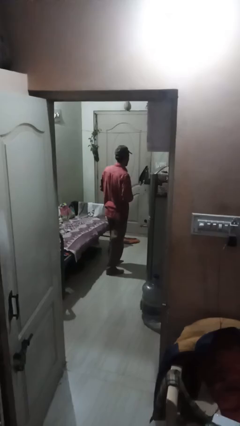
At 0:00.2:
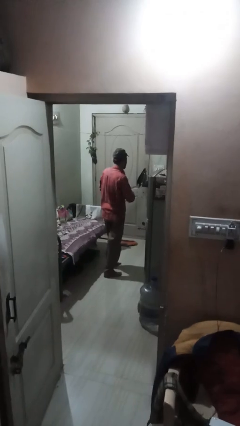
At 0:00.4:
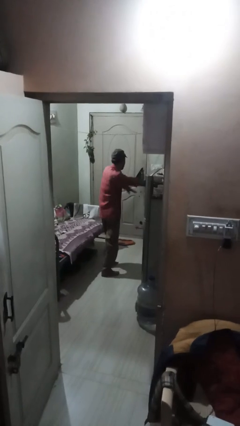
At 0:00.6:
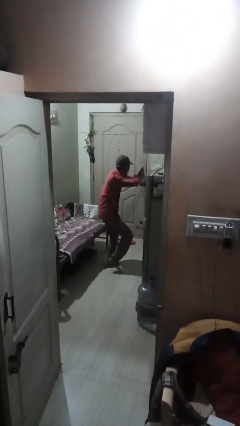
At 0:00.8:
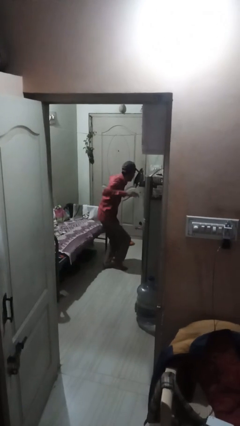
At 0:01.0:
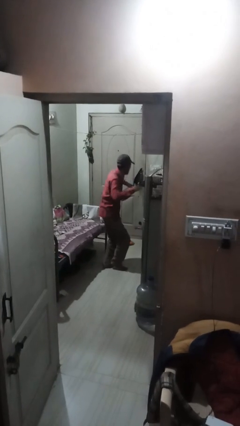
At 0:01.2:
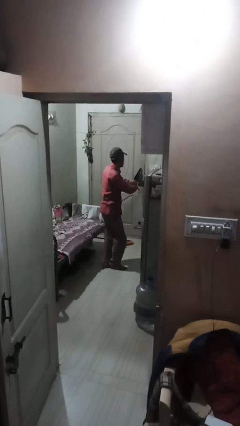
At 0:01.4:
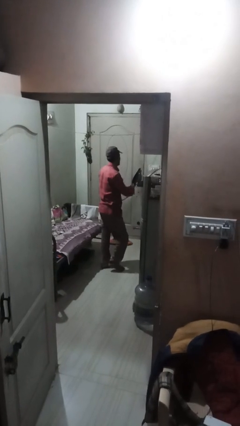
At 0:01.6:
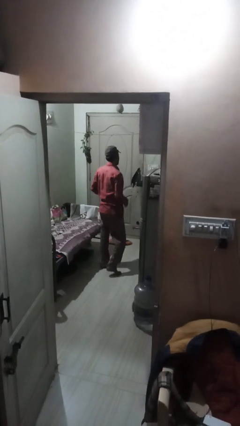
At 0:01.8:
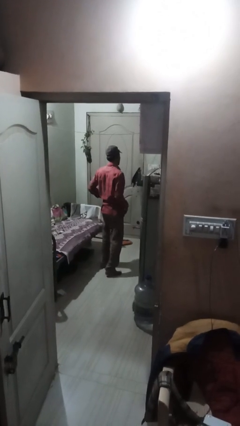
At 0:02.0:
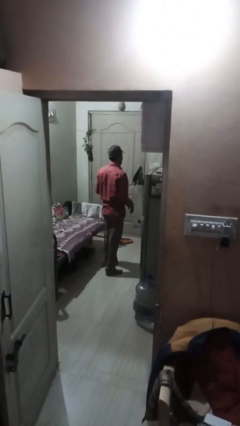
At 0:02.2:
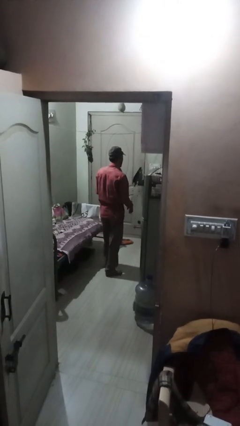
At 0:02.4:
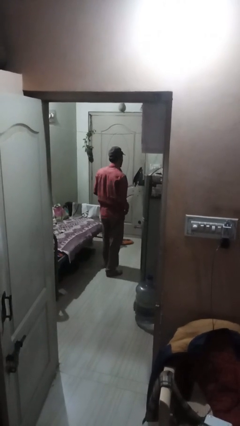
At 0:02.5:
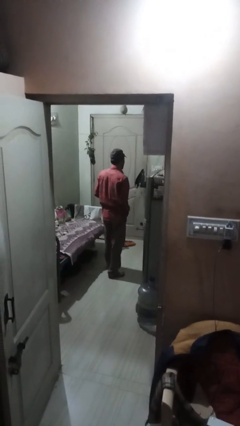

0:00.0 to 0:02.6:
person karate chop

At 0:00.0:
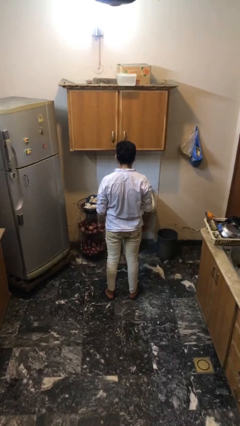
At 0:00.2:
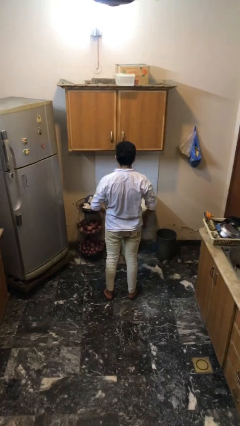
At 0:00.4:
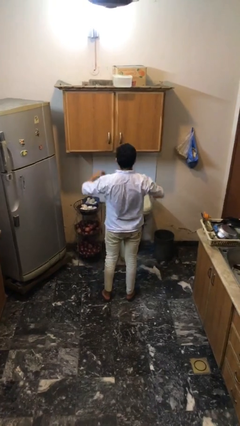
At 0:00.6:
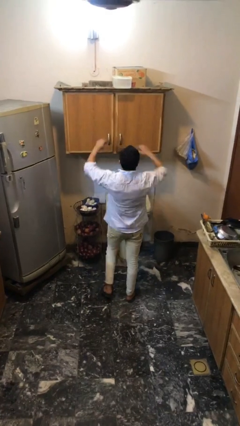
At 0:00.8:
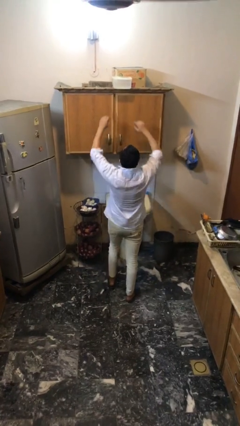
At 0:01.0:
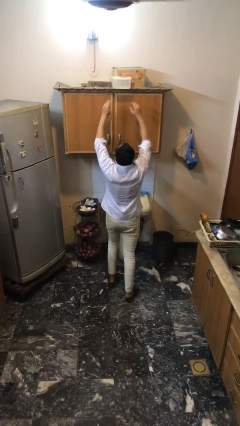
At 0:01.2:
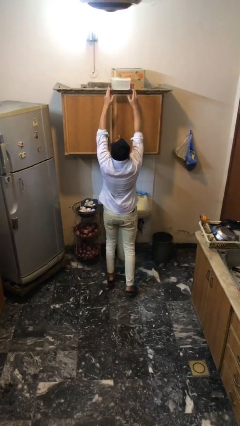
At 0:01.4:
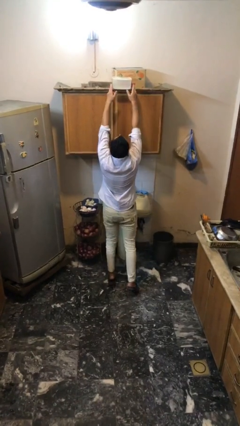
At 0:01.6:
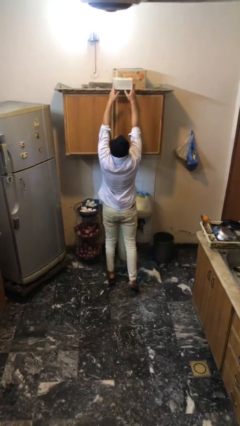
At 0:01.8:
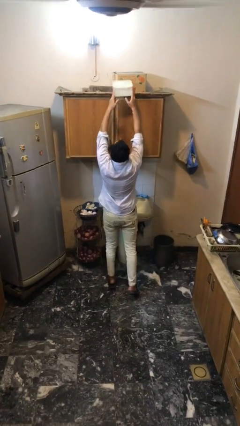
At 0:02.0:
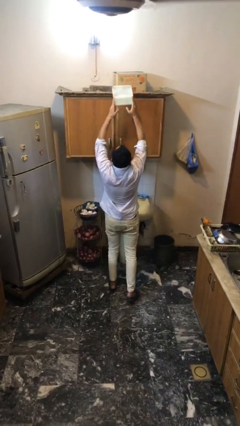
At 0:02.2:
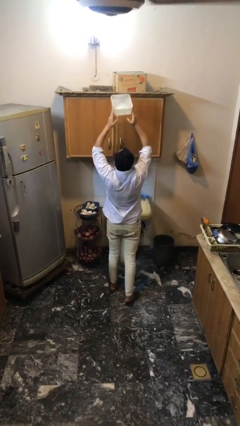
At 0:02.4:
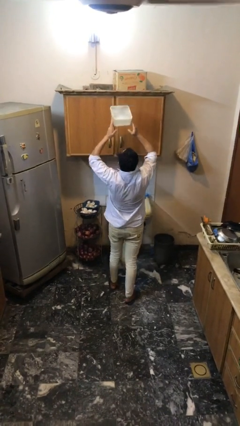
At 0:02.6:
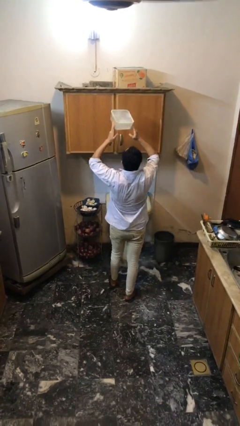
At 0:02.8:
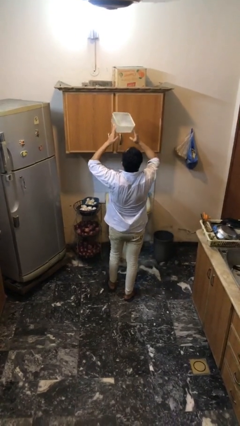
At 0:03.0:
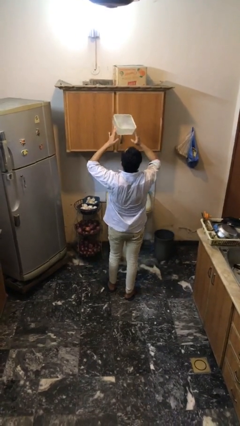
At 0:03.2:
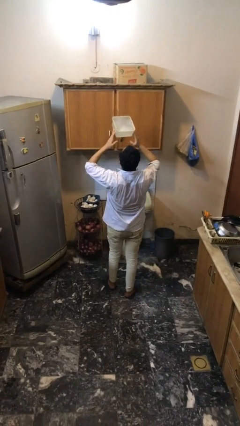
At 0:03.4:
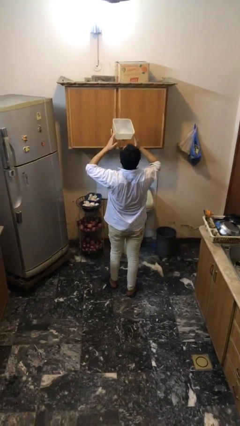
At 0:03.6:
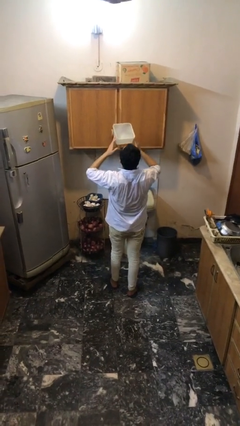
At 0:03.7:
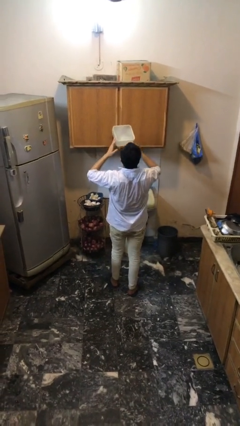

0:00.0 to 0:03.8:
person picks up object from shelf

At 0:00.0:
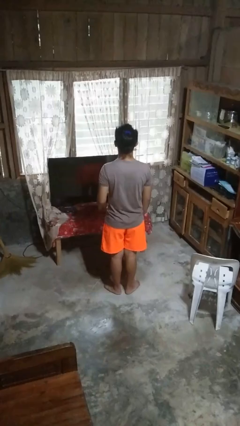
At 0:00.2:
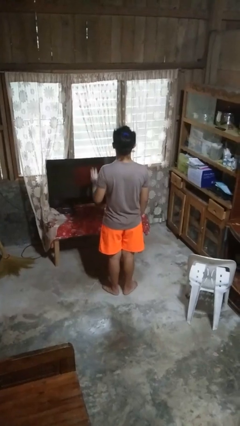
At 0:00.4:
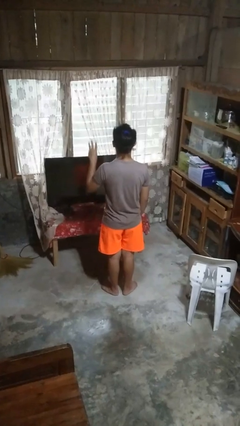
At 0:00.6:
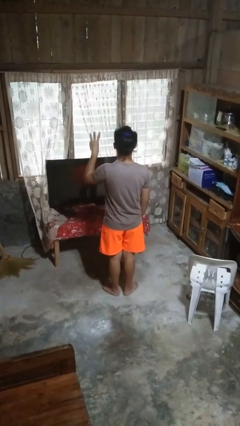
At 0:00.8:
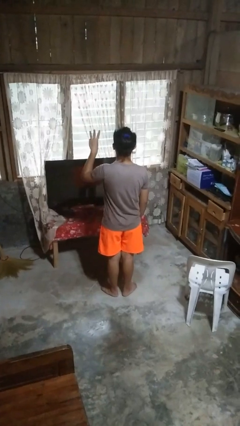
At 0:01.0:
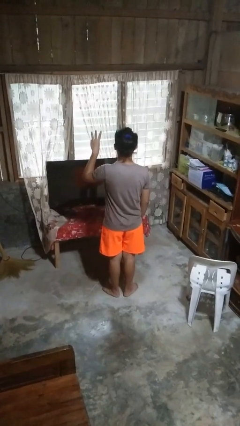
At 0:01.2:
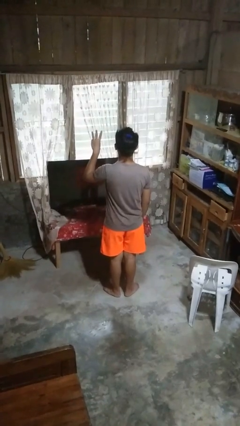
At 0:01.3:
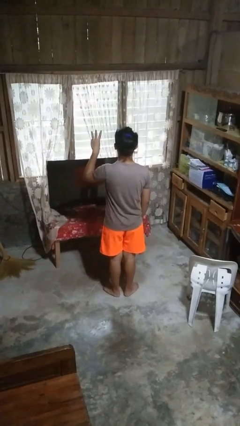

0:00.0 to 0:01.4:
person gestures number three

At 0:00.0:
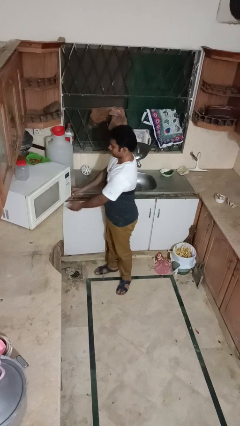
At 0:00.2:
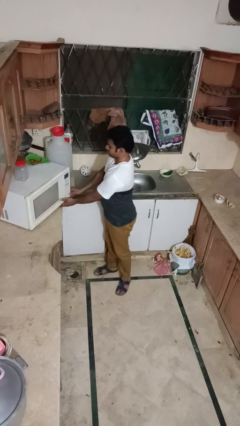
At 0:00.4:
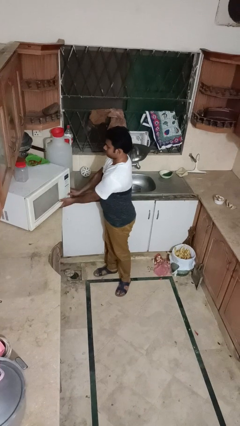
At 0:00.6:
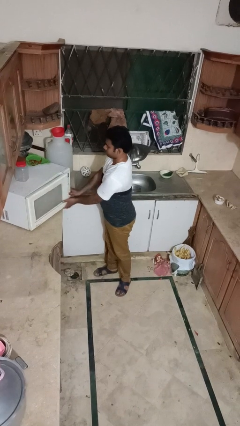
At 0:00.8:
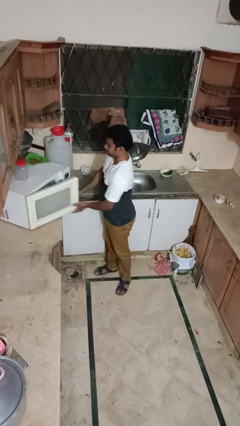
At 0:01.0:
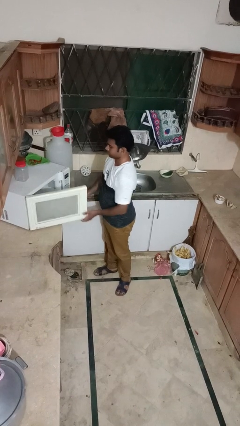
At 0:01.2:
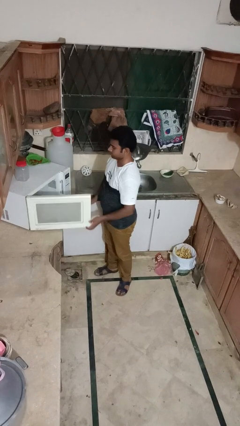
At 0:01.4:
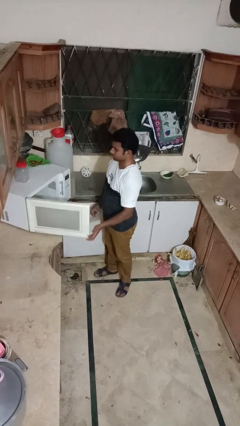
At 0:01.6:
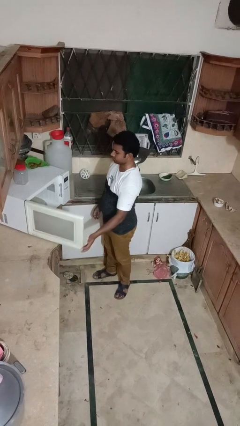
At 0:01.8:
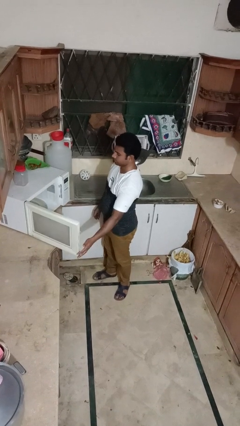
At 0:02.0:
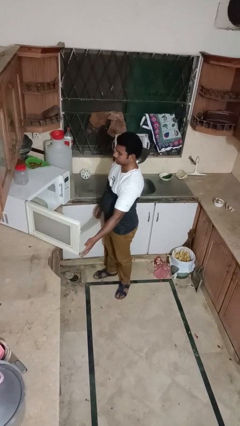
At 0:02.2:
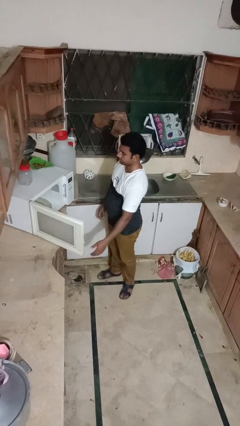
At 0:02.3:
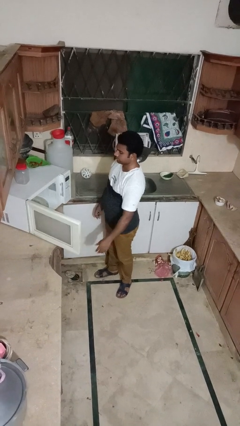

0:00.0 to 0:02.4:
person opens oven door

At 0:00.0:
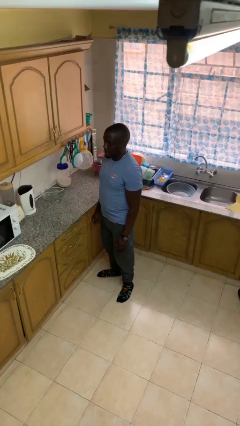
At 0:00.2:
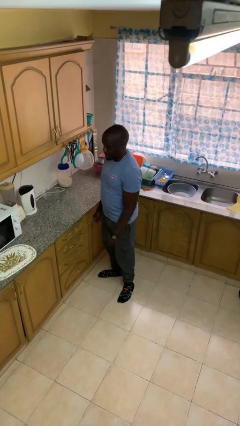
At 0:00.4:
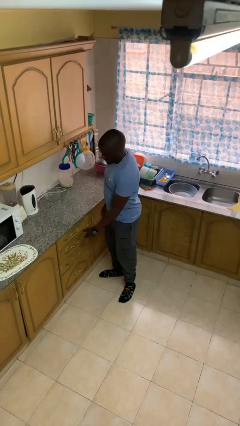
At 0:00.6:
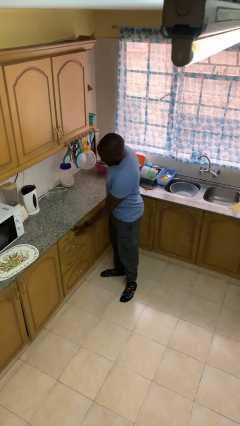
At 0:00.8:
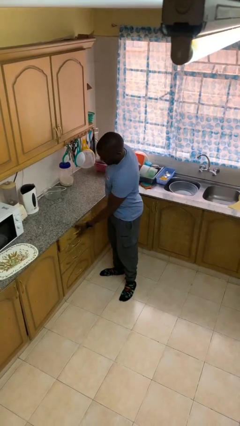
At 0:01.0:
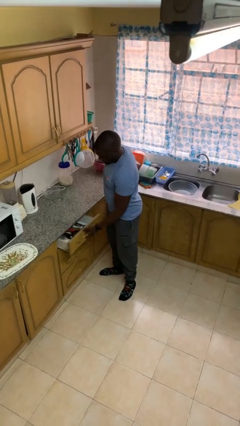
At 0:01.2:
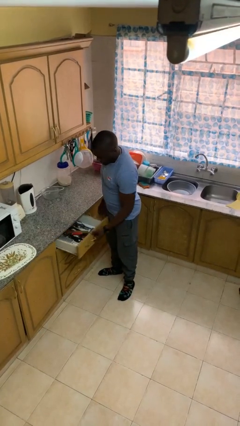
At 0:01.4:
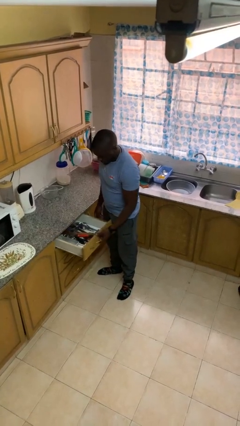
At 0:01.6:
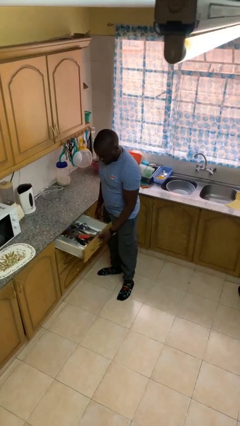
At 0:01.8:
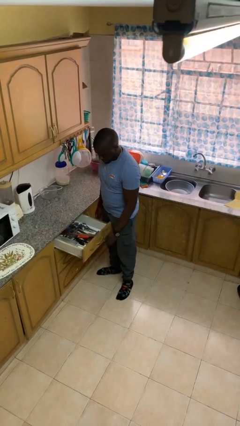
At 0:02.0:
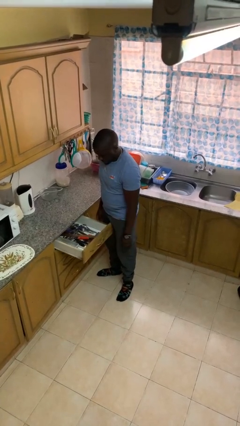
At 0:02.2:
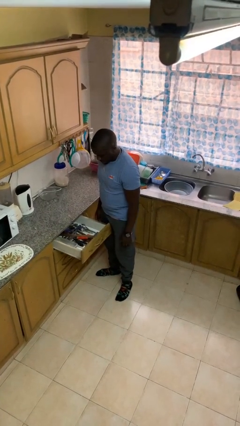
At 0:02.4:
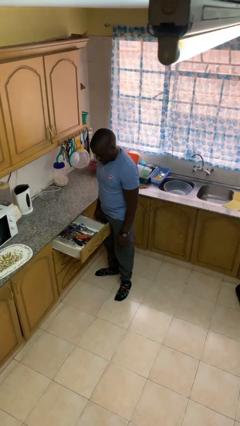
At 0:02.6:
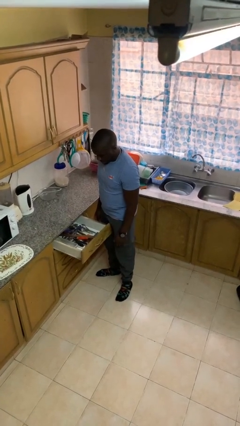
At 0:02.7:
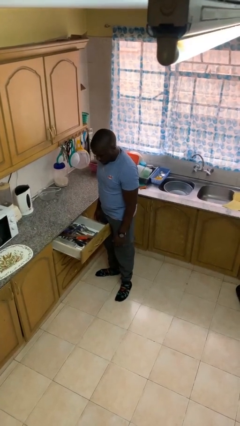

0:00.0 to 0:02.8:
person opens kitchen drawer

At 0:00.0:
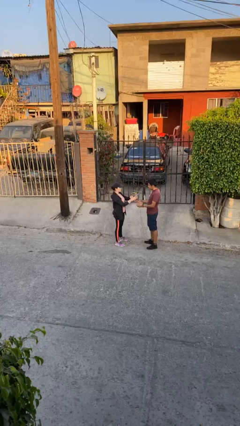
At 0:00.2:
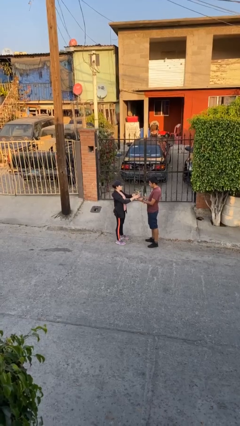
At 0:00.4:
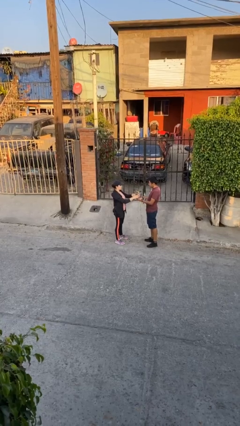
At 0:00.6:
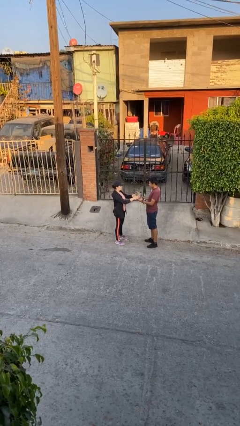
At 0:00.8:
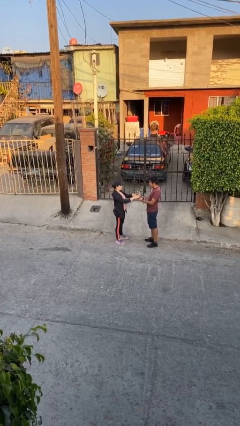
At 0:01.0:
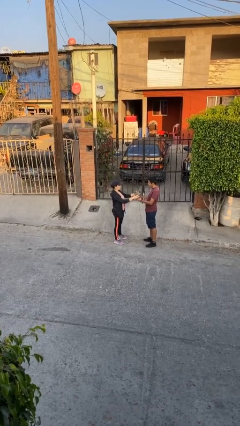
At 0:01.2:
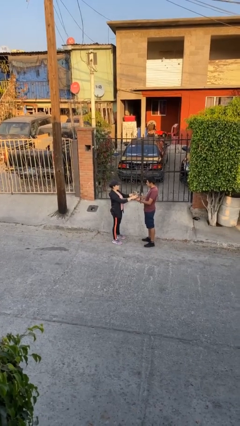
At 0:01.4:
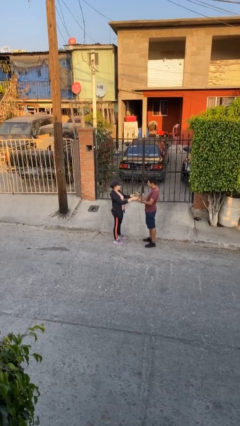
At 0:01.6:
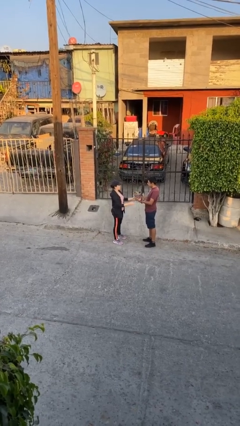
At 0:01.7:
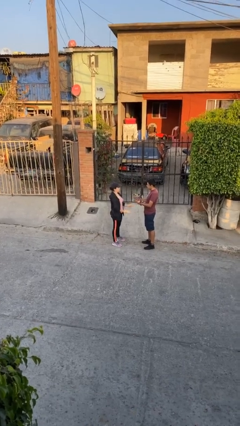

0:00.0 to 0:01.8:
person transfers object to person

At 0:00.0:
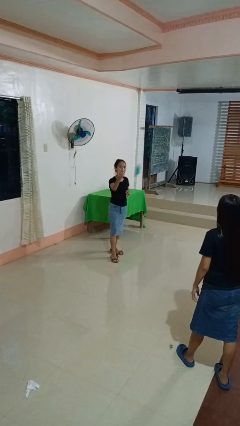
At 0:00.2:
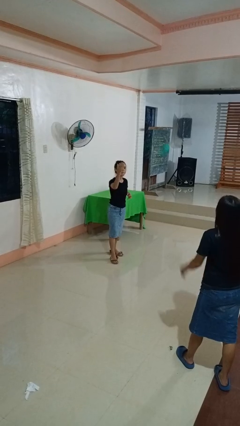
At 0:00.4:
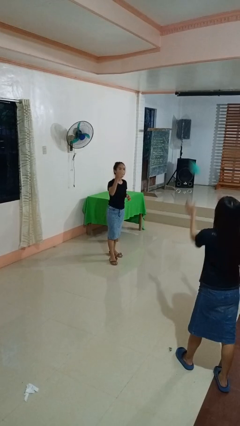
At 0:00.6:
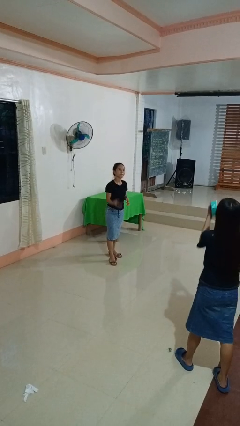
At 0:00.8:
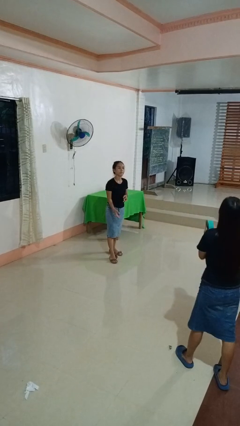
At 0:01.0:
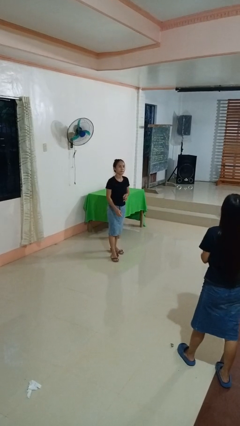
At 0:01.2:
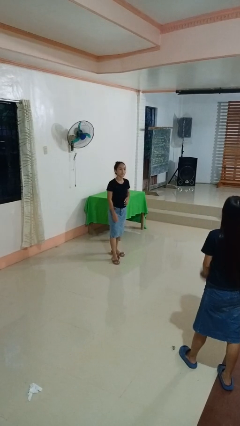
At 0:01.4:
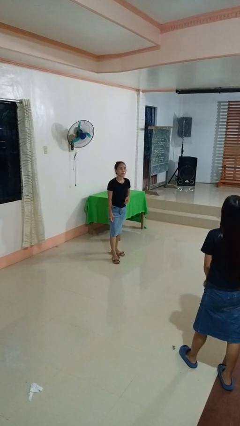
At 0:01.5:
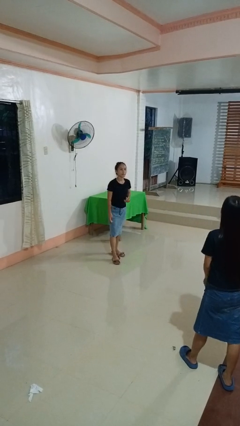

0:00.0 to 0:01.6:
person throws object to person

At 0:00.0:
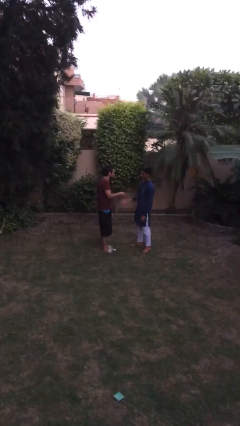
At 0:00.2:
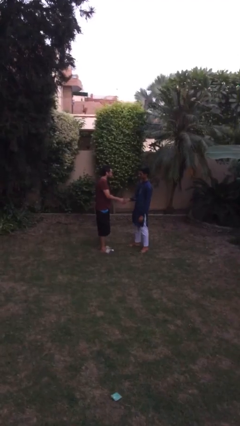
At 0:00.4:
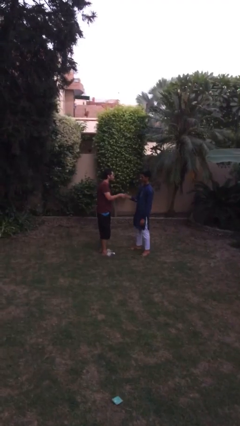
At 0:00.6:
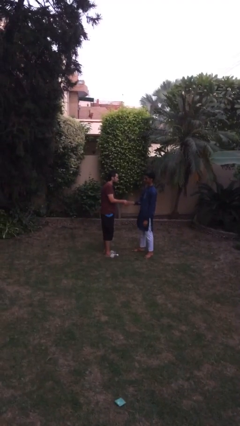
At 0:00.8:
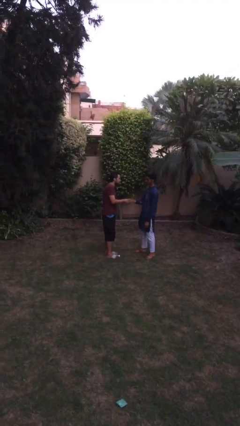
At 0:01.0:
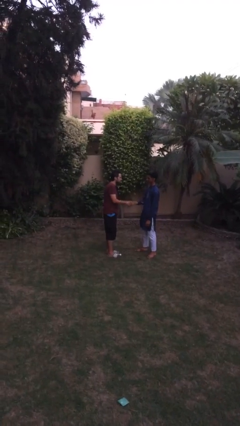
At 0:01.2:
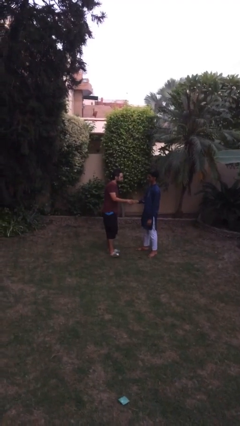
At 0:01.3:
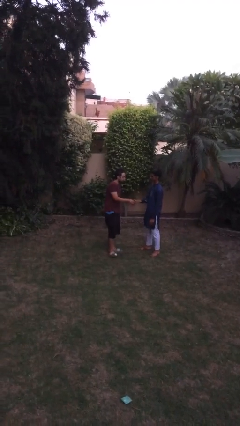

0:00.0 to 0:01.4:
person shakes hand
